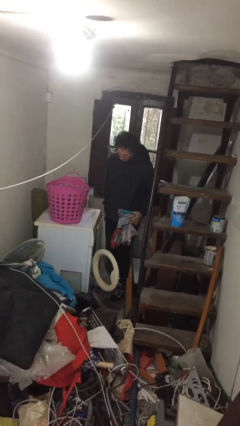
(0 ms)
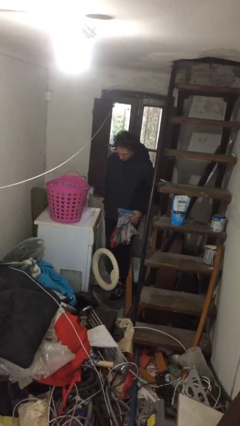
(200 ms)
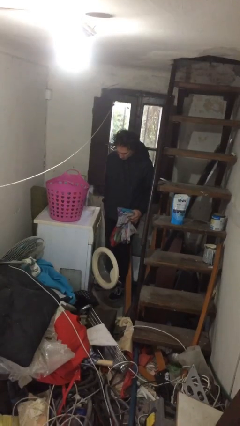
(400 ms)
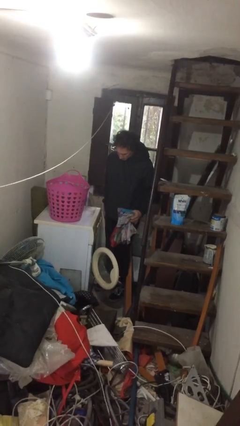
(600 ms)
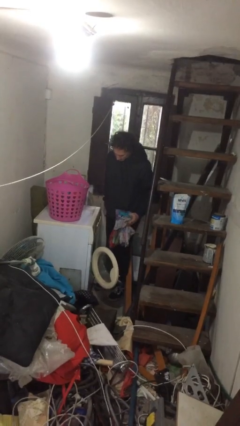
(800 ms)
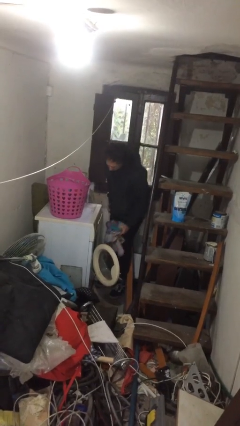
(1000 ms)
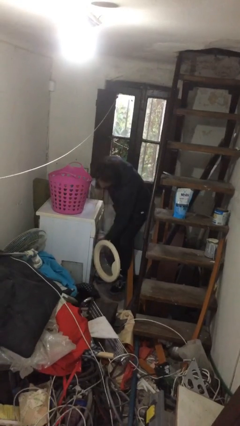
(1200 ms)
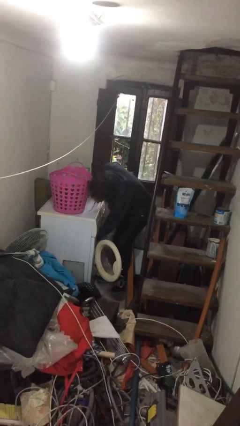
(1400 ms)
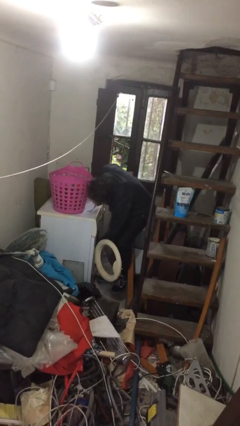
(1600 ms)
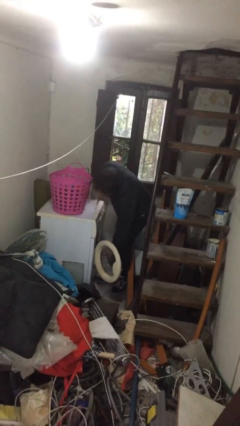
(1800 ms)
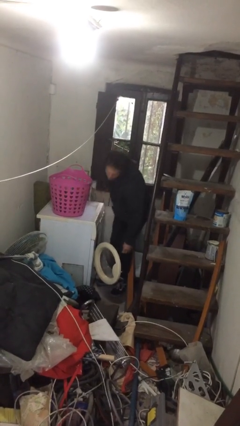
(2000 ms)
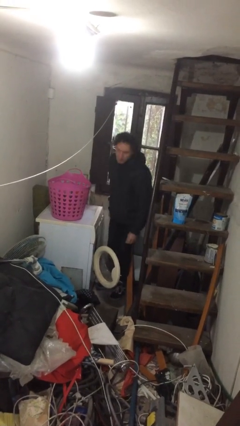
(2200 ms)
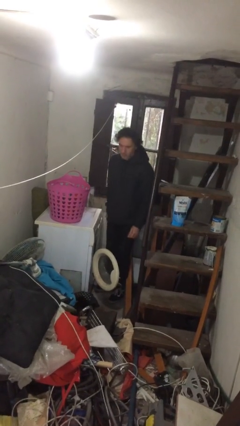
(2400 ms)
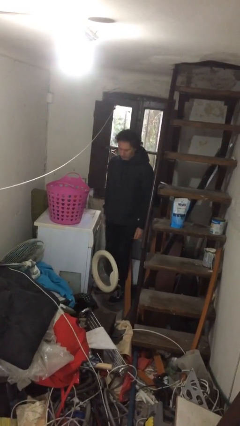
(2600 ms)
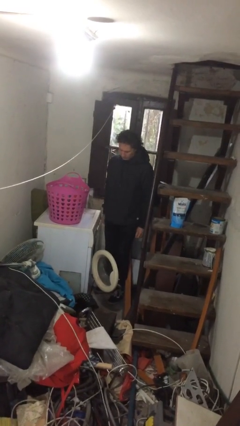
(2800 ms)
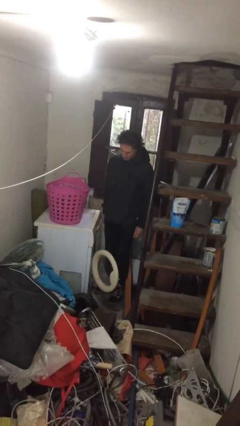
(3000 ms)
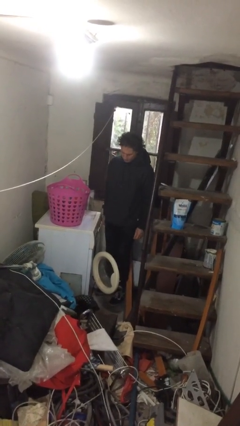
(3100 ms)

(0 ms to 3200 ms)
person loads clotheswasher

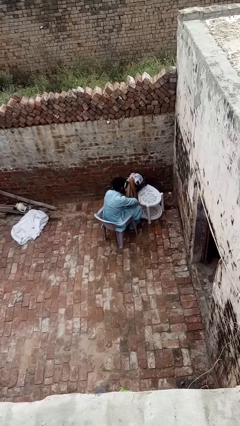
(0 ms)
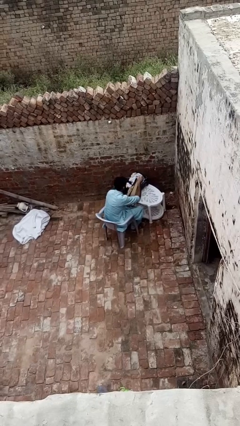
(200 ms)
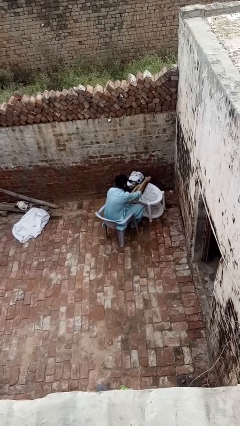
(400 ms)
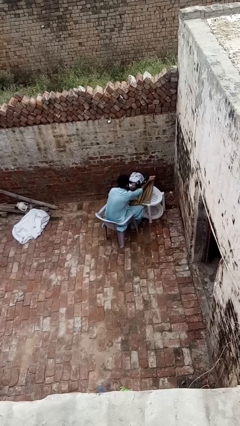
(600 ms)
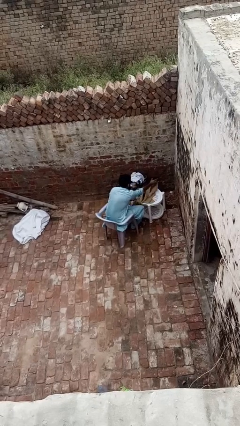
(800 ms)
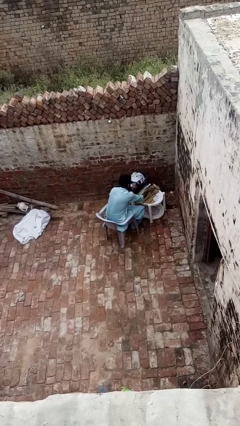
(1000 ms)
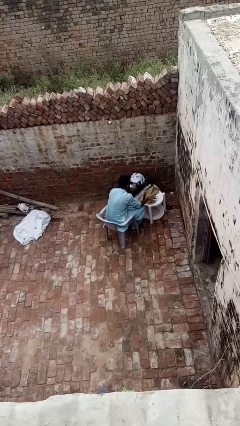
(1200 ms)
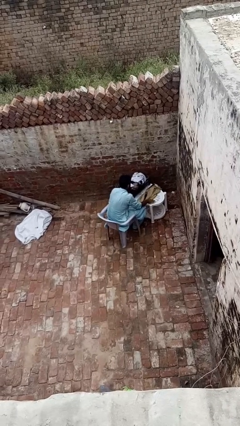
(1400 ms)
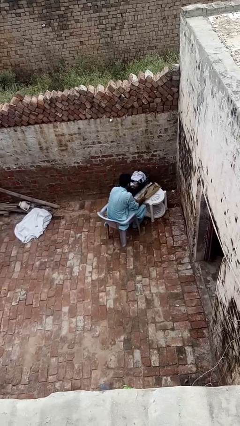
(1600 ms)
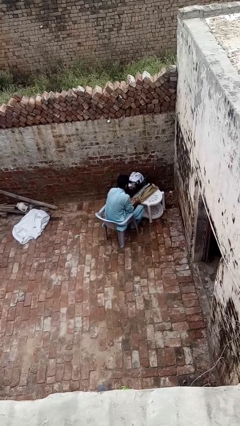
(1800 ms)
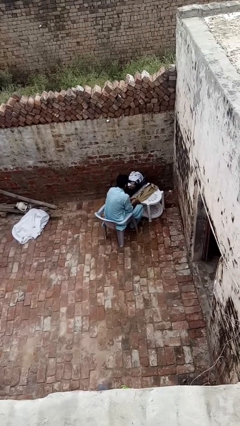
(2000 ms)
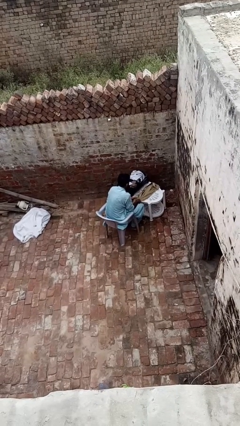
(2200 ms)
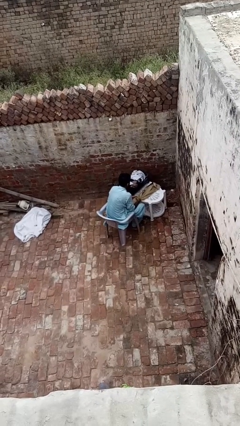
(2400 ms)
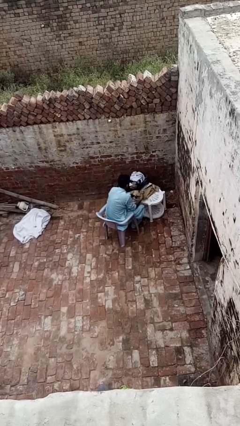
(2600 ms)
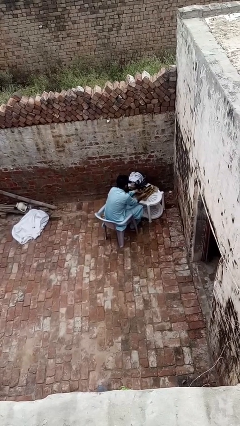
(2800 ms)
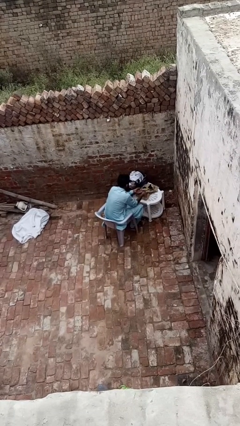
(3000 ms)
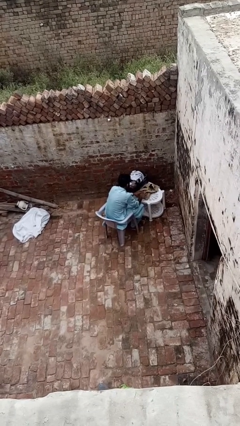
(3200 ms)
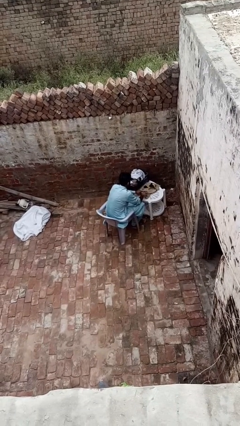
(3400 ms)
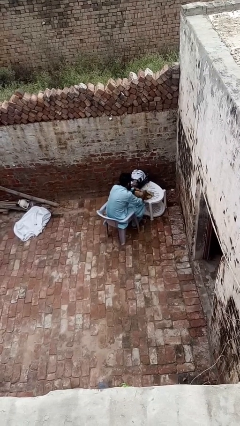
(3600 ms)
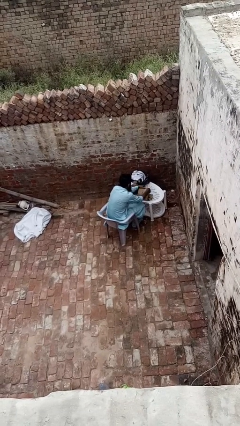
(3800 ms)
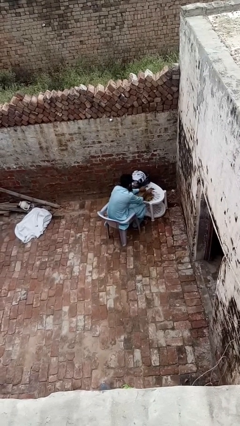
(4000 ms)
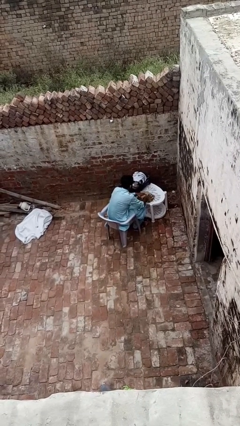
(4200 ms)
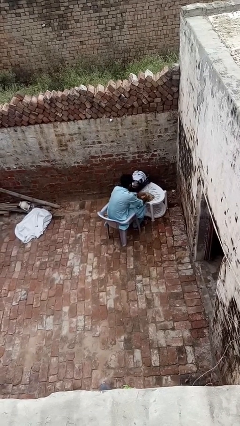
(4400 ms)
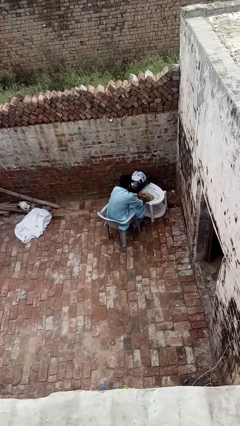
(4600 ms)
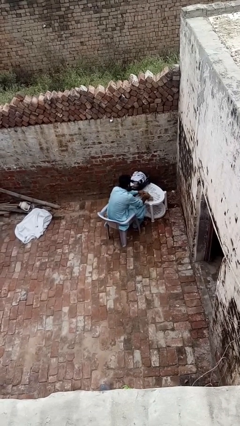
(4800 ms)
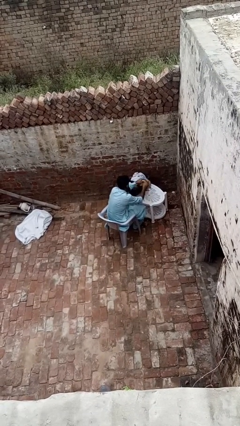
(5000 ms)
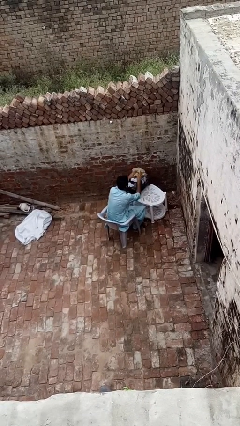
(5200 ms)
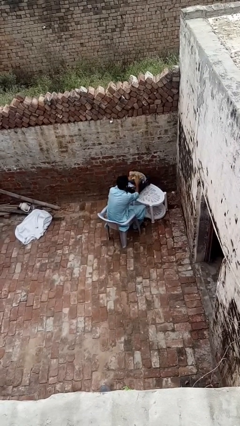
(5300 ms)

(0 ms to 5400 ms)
person folds shirt

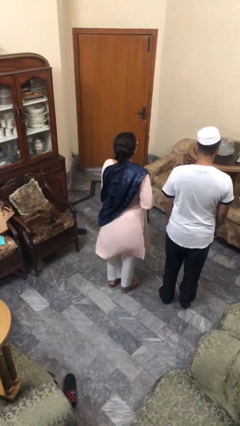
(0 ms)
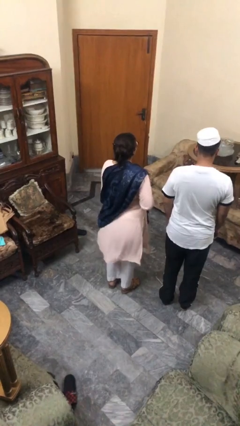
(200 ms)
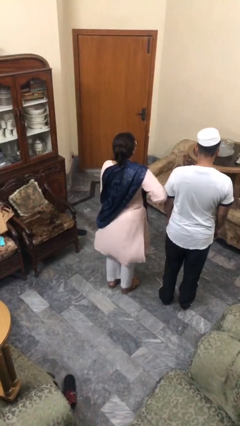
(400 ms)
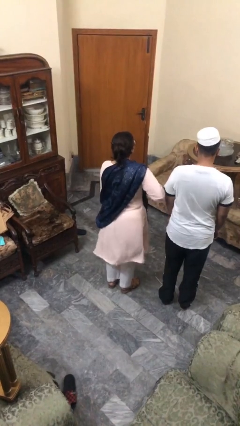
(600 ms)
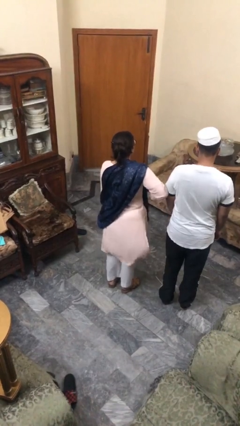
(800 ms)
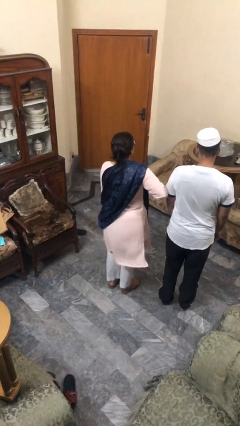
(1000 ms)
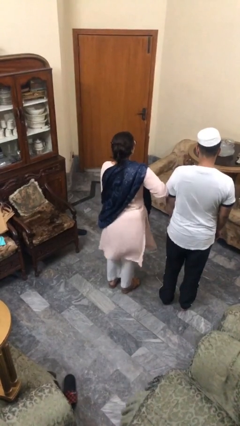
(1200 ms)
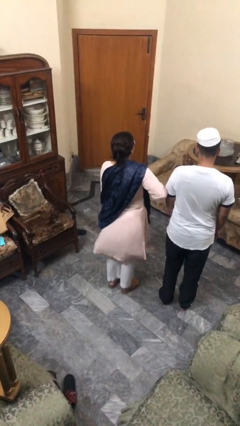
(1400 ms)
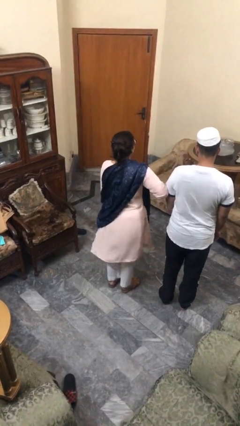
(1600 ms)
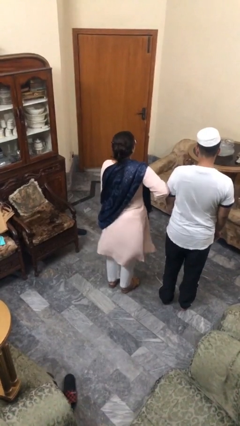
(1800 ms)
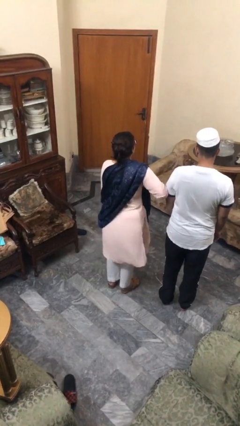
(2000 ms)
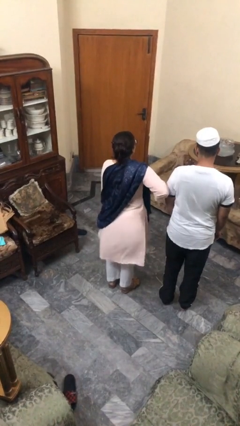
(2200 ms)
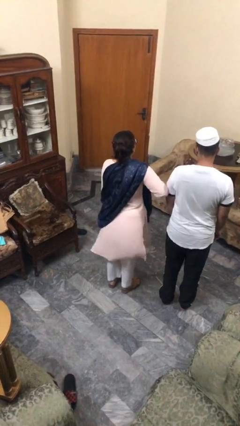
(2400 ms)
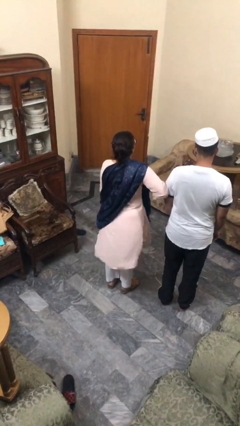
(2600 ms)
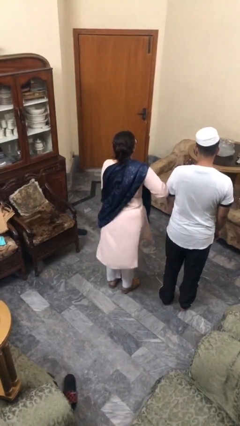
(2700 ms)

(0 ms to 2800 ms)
person nudges person with elbow

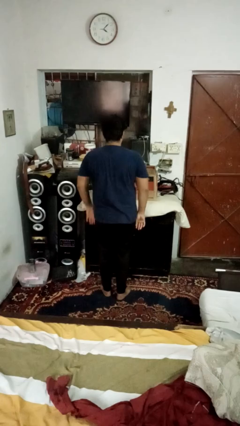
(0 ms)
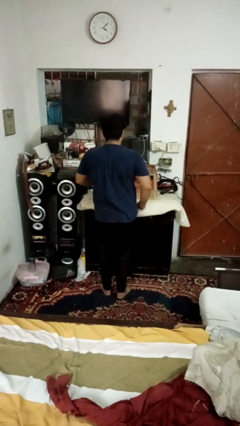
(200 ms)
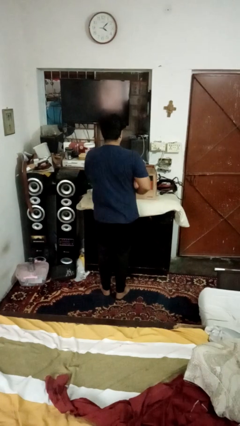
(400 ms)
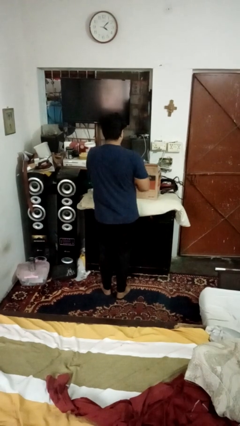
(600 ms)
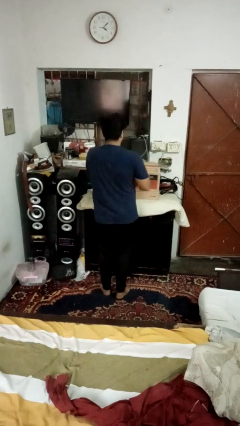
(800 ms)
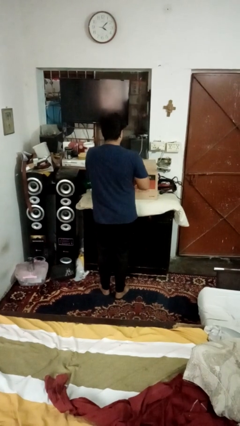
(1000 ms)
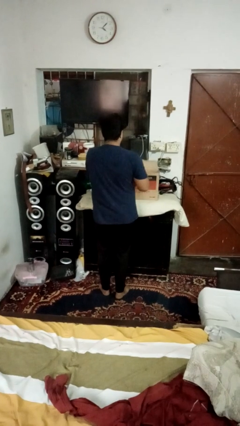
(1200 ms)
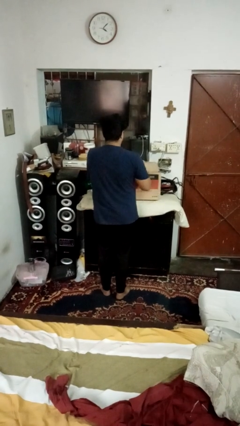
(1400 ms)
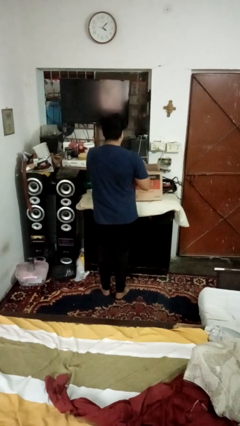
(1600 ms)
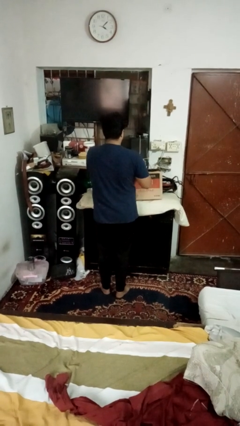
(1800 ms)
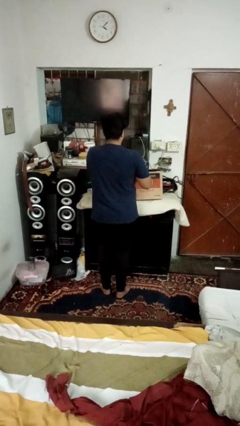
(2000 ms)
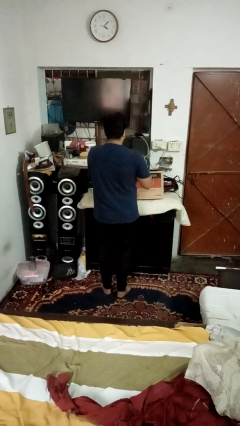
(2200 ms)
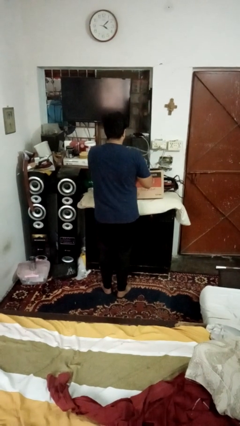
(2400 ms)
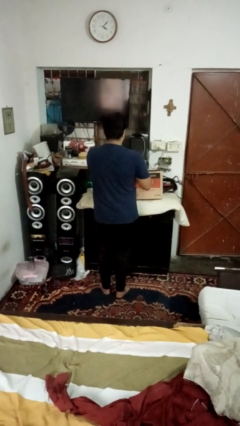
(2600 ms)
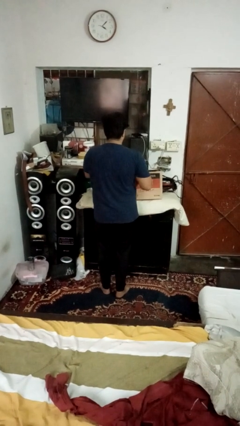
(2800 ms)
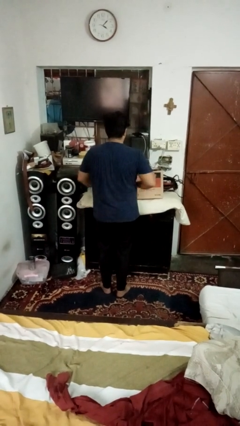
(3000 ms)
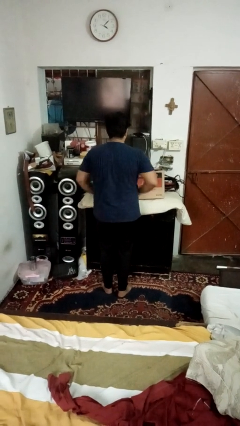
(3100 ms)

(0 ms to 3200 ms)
person closes box

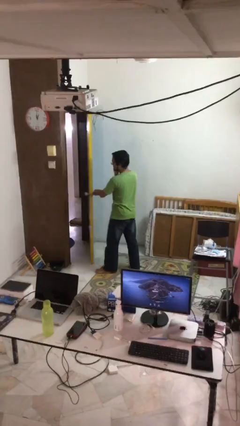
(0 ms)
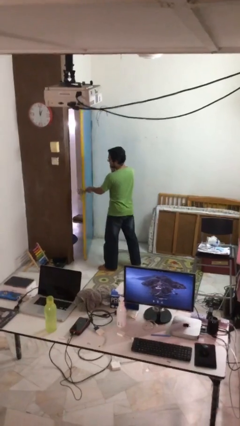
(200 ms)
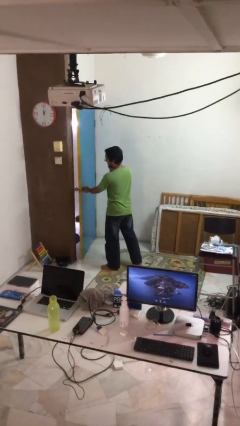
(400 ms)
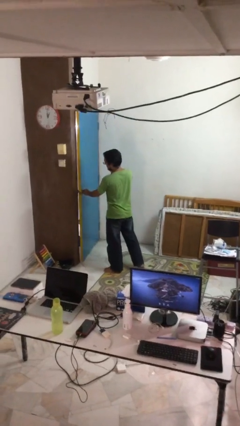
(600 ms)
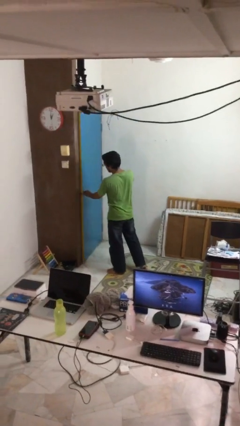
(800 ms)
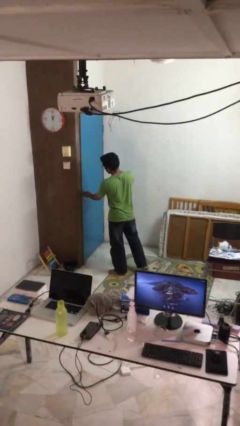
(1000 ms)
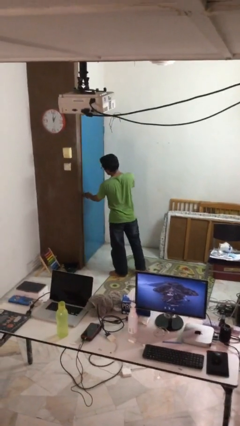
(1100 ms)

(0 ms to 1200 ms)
person closes facility door

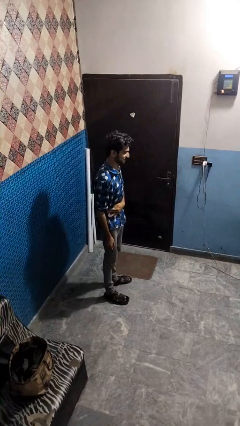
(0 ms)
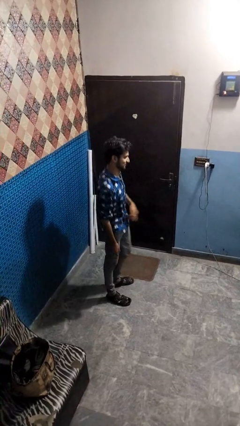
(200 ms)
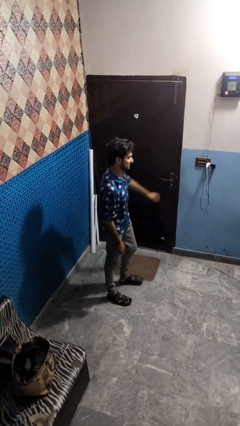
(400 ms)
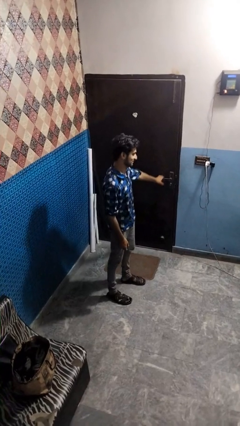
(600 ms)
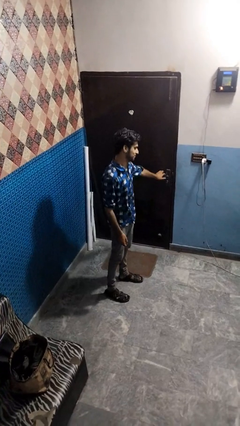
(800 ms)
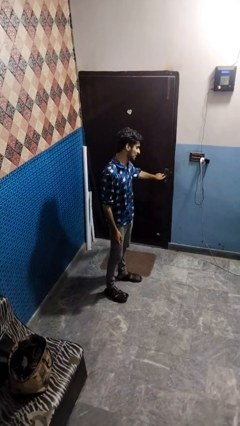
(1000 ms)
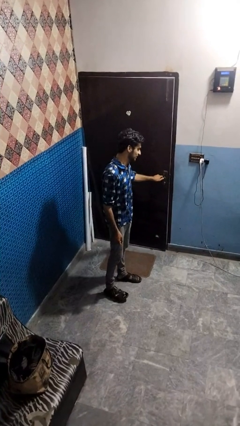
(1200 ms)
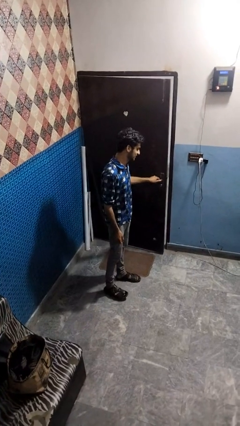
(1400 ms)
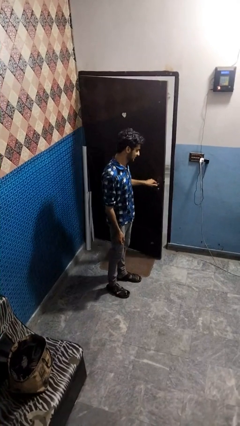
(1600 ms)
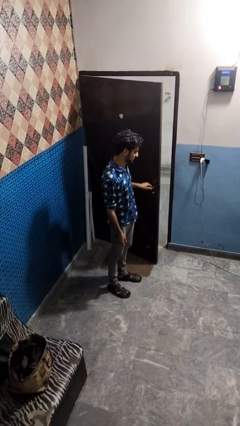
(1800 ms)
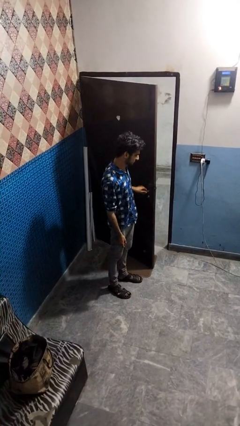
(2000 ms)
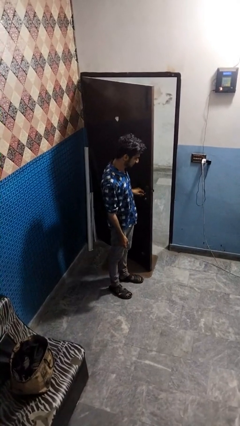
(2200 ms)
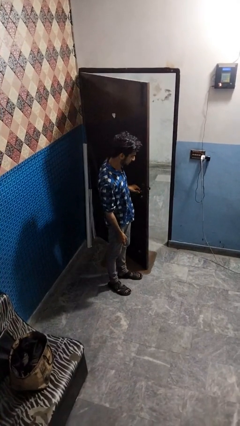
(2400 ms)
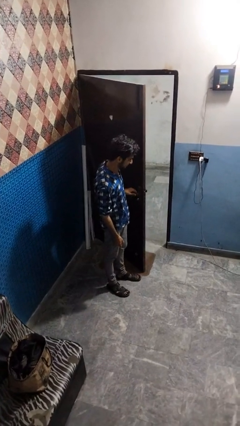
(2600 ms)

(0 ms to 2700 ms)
person opens facility door
